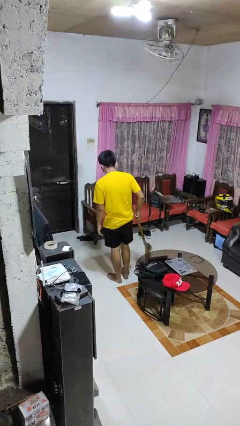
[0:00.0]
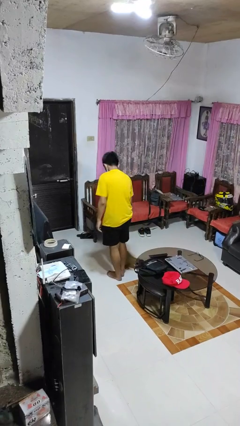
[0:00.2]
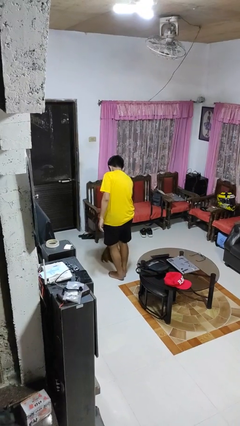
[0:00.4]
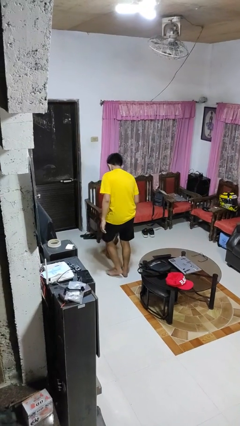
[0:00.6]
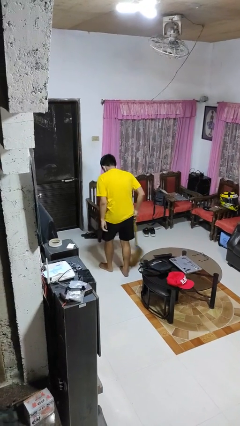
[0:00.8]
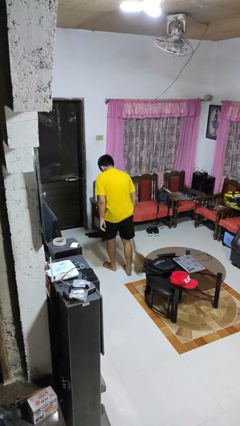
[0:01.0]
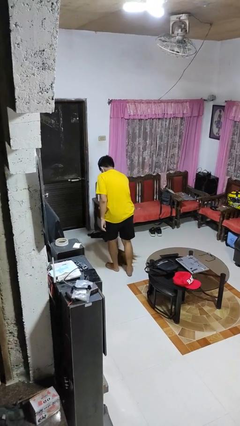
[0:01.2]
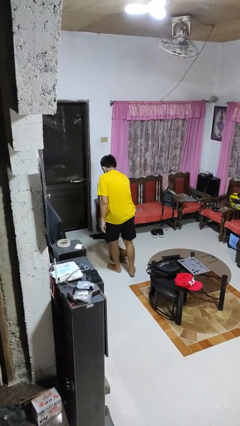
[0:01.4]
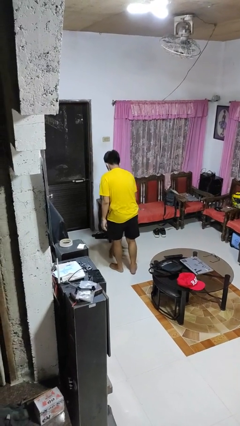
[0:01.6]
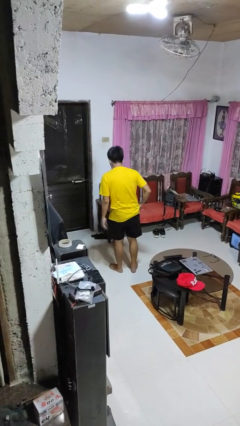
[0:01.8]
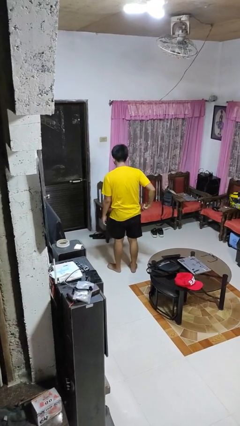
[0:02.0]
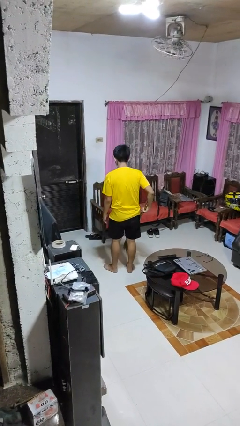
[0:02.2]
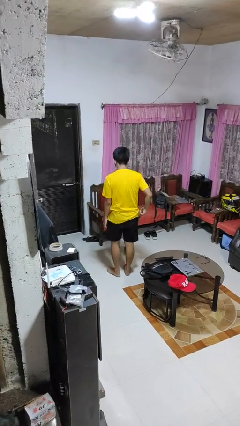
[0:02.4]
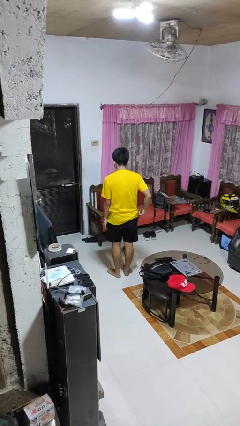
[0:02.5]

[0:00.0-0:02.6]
person sweeps floor

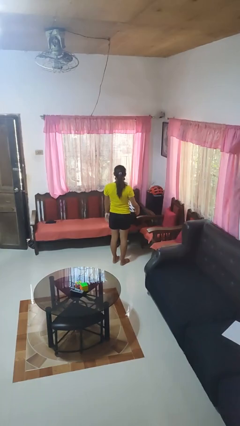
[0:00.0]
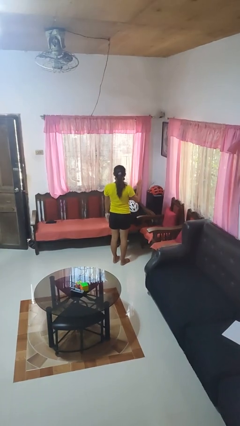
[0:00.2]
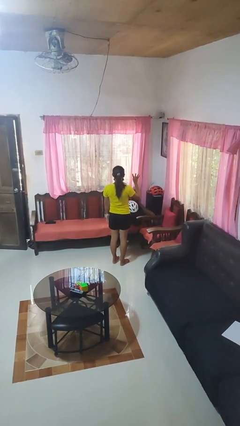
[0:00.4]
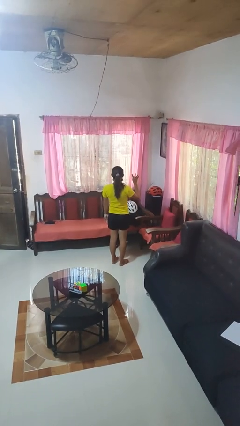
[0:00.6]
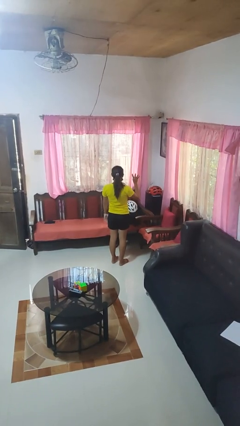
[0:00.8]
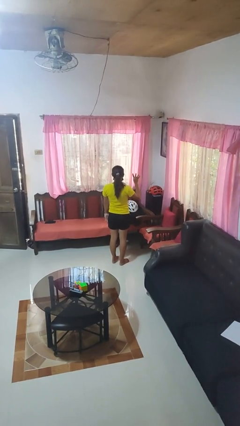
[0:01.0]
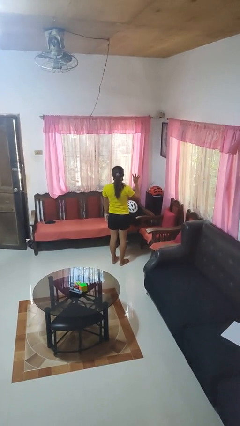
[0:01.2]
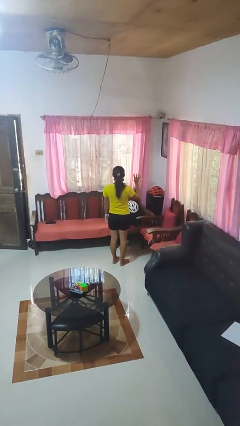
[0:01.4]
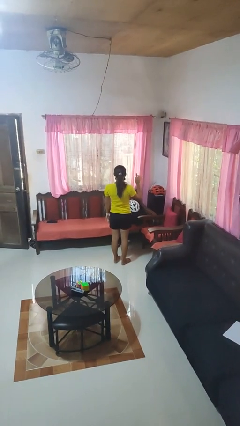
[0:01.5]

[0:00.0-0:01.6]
person gestures number four

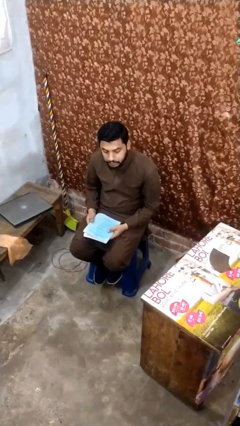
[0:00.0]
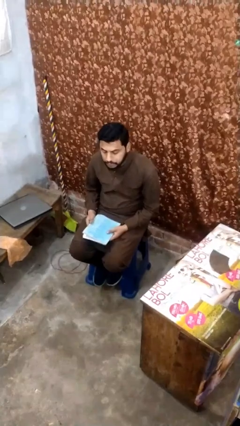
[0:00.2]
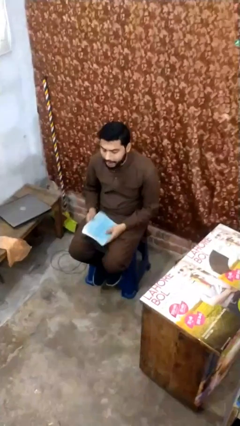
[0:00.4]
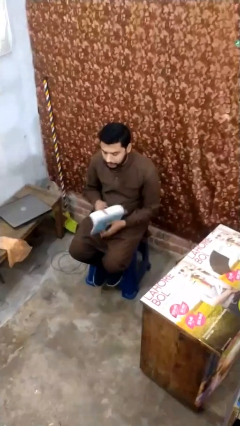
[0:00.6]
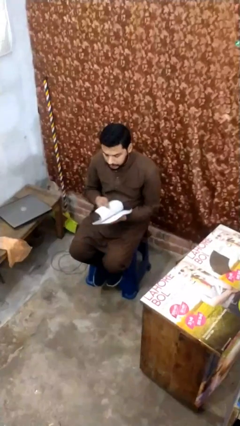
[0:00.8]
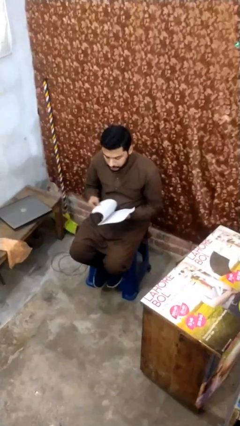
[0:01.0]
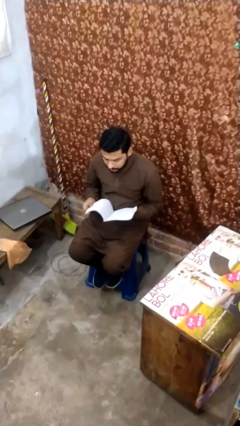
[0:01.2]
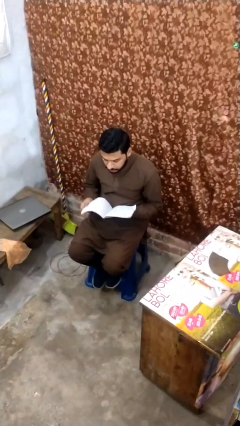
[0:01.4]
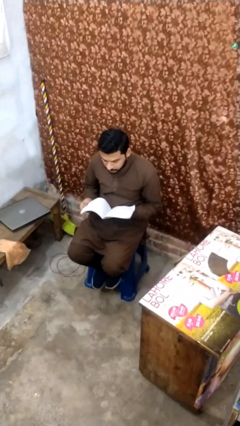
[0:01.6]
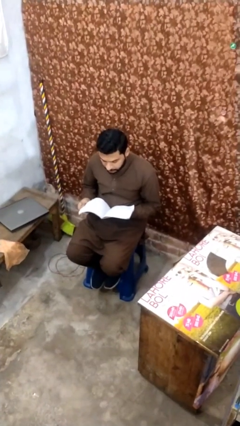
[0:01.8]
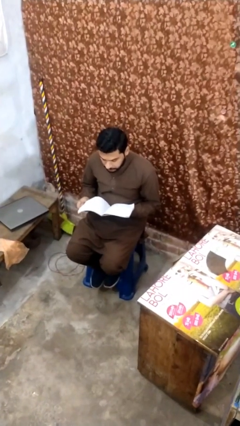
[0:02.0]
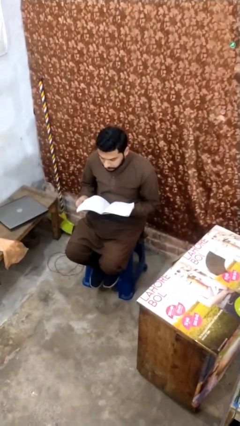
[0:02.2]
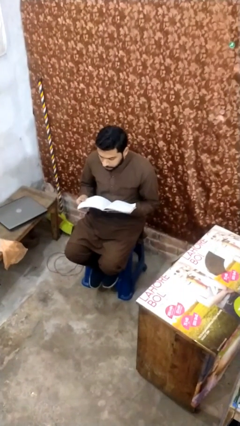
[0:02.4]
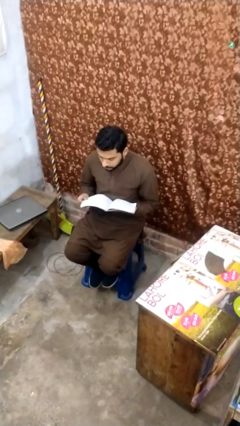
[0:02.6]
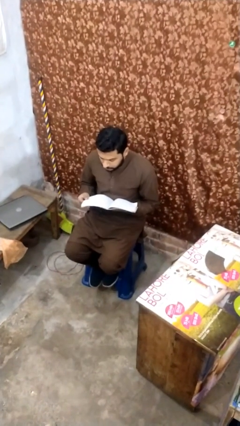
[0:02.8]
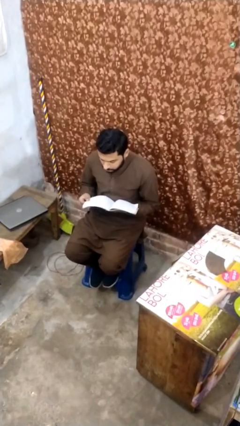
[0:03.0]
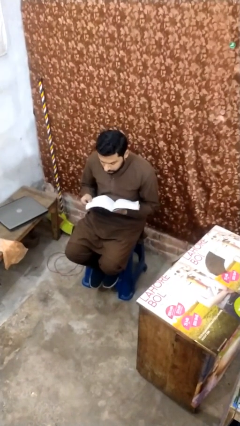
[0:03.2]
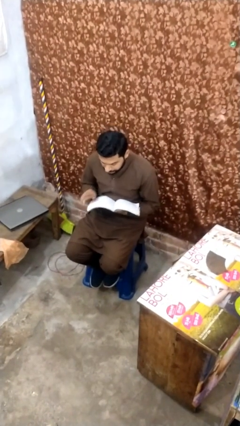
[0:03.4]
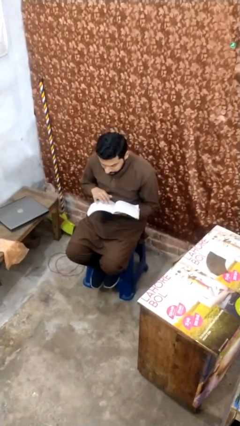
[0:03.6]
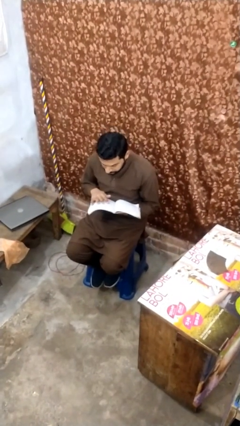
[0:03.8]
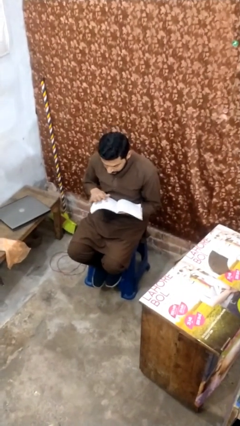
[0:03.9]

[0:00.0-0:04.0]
person reads document

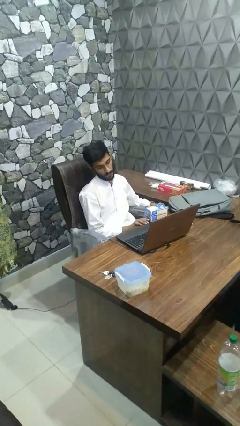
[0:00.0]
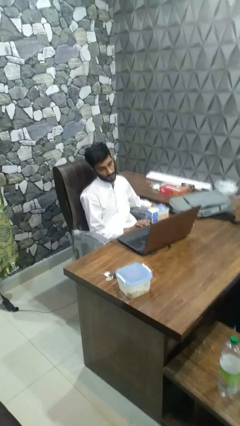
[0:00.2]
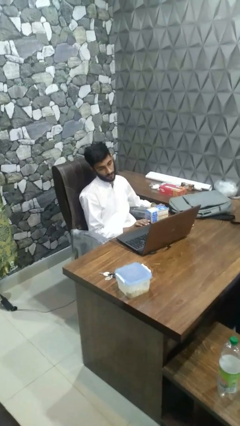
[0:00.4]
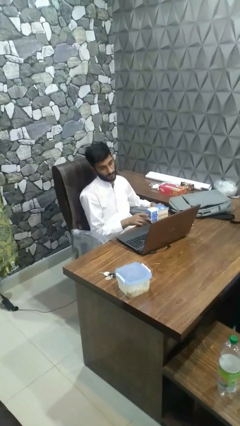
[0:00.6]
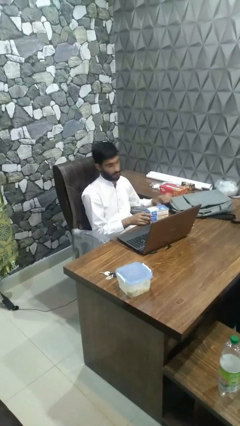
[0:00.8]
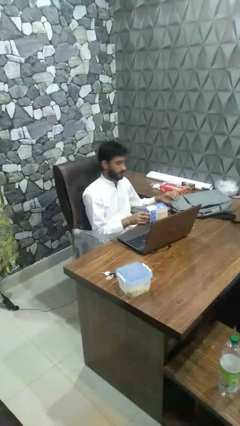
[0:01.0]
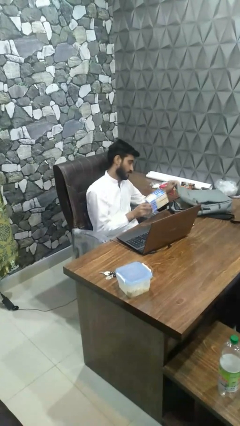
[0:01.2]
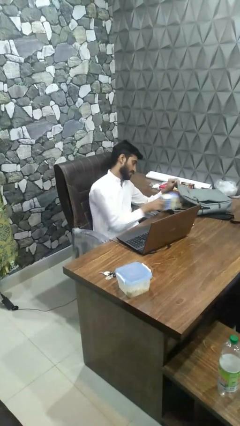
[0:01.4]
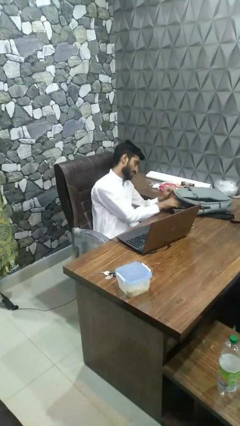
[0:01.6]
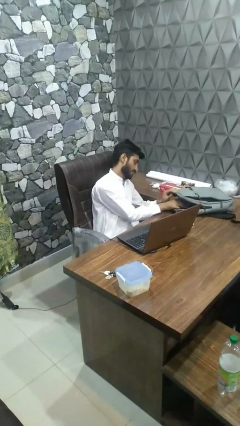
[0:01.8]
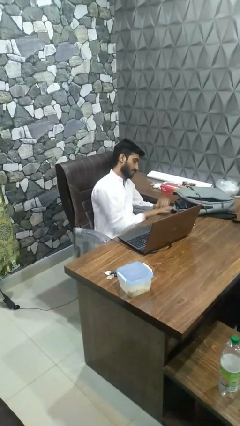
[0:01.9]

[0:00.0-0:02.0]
person puts object into bag

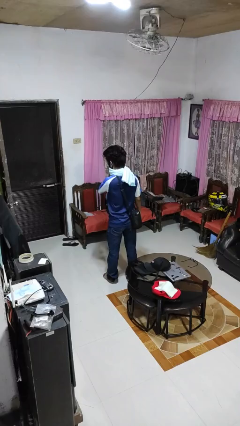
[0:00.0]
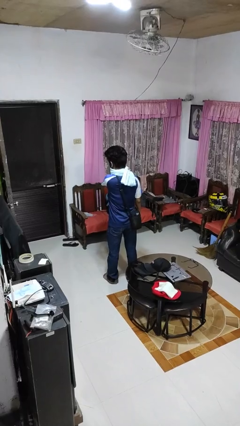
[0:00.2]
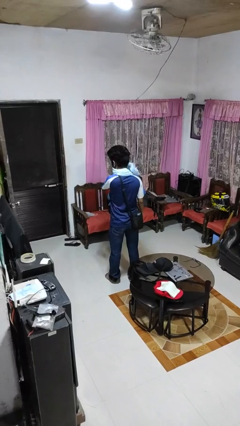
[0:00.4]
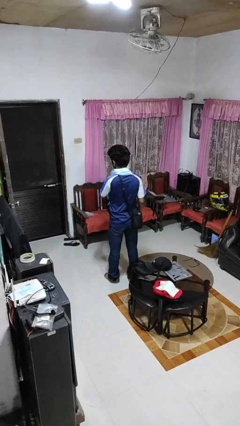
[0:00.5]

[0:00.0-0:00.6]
person takes off scarf

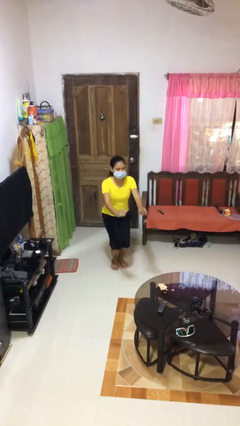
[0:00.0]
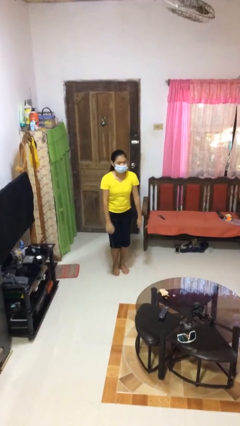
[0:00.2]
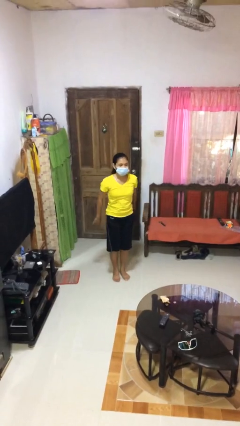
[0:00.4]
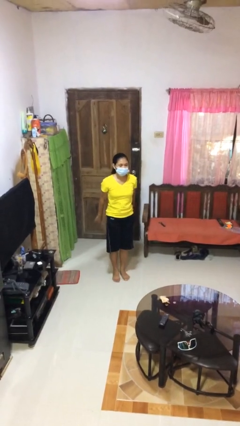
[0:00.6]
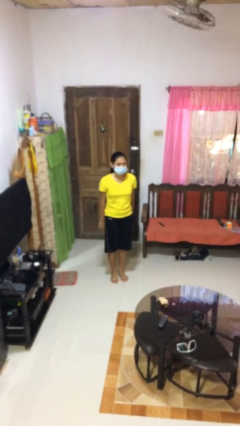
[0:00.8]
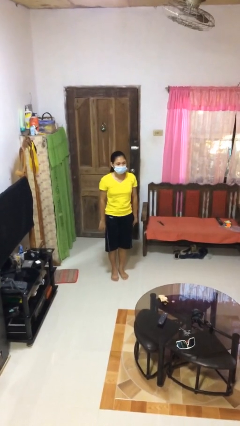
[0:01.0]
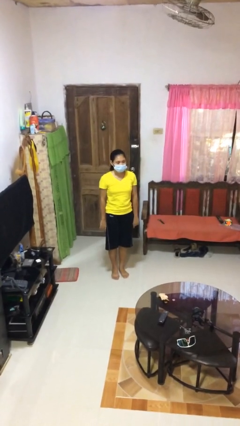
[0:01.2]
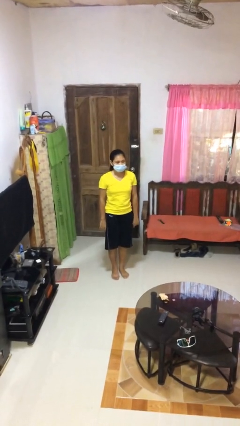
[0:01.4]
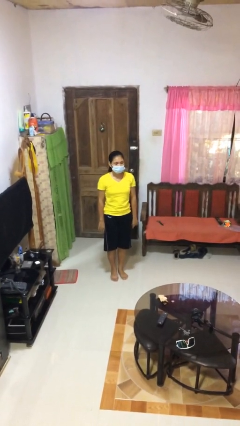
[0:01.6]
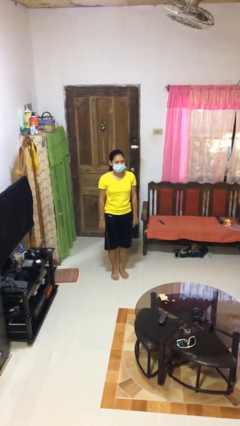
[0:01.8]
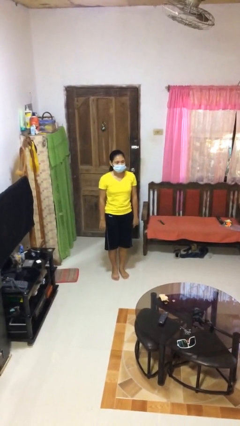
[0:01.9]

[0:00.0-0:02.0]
person stands up

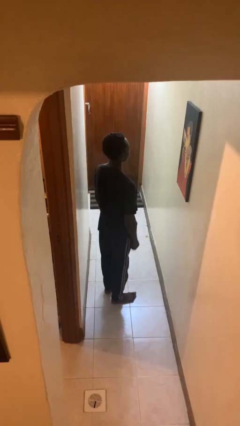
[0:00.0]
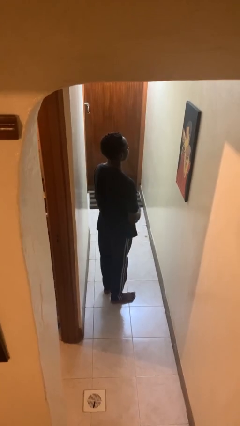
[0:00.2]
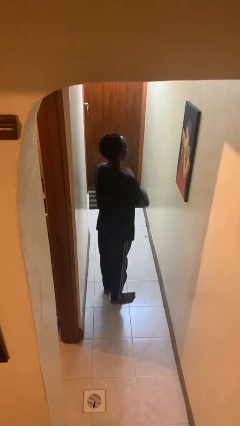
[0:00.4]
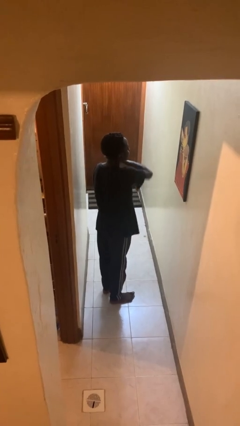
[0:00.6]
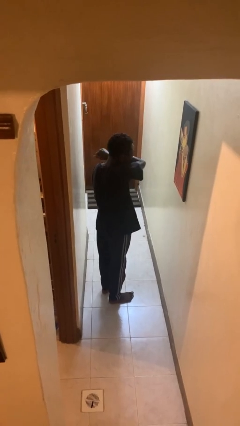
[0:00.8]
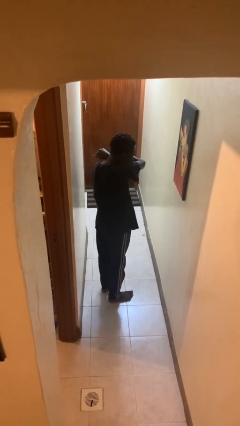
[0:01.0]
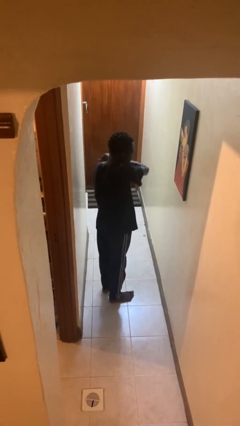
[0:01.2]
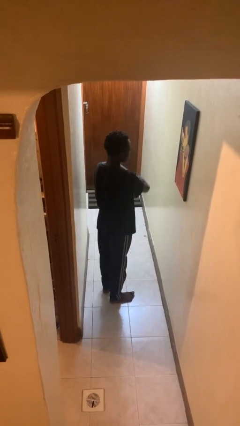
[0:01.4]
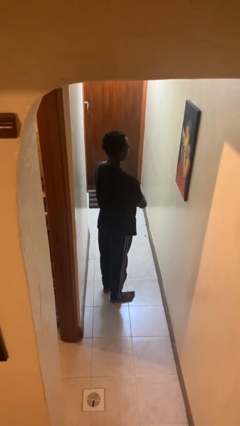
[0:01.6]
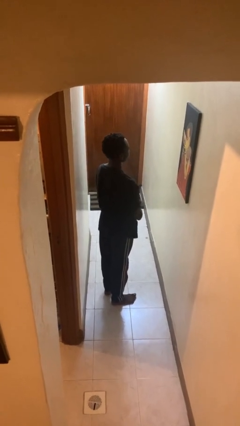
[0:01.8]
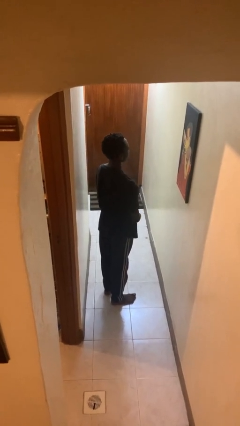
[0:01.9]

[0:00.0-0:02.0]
person sneezes into arm

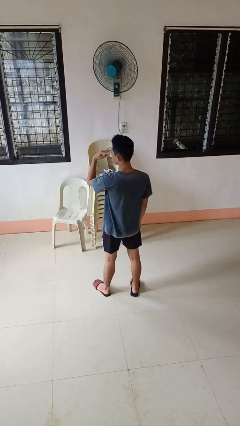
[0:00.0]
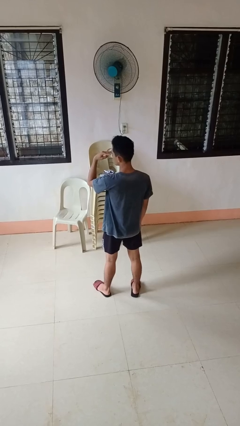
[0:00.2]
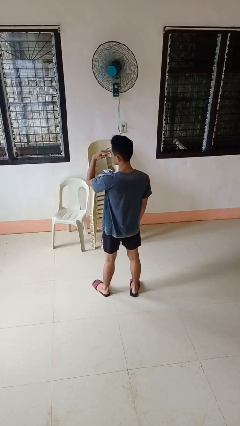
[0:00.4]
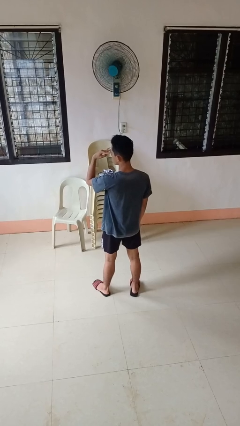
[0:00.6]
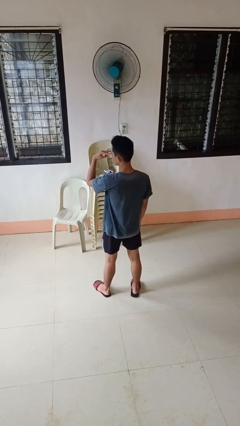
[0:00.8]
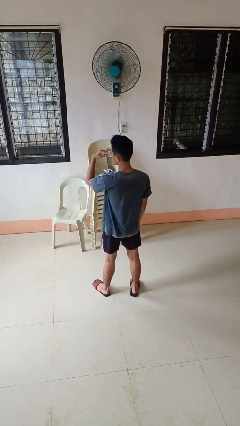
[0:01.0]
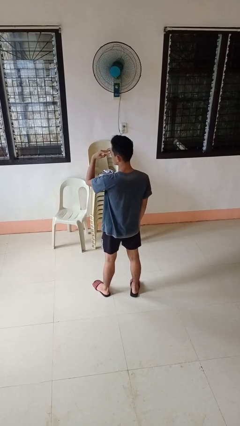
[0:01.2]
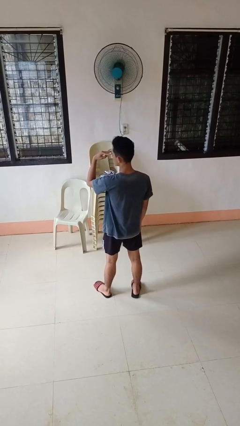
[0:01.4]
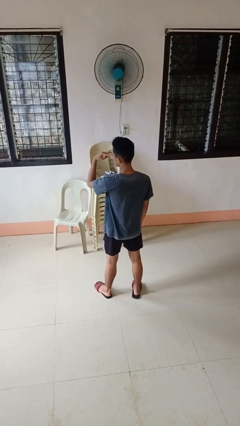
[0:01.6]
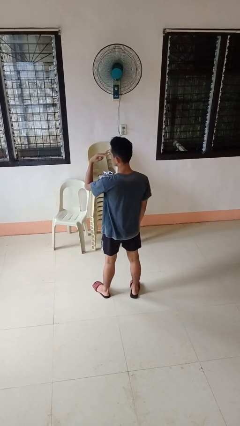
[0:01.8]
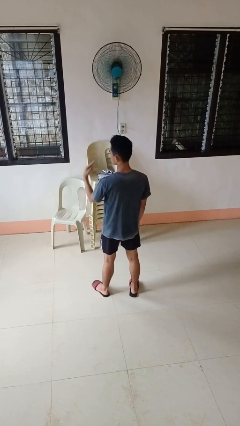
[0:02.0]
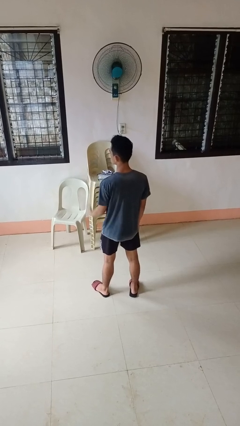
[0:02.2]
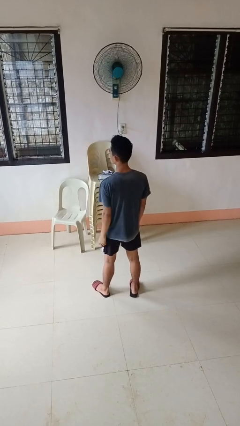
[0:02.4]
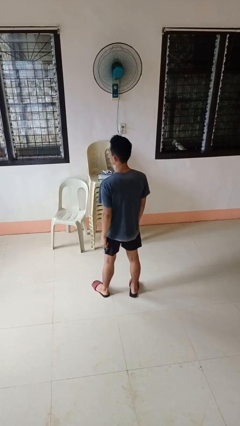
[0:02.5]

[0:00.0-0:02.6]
person gestures watch closely
